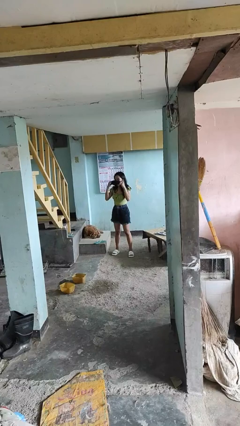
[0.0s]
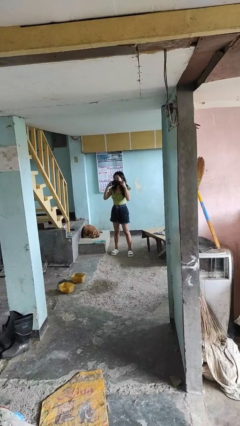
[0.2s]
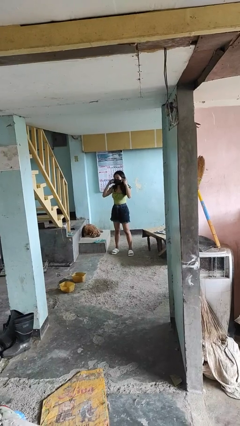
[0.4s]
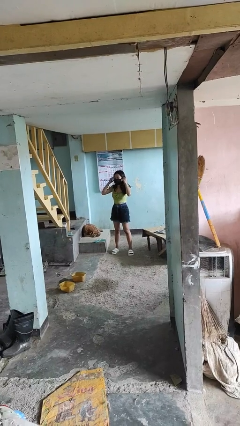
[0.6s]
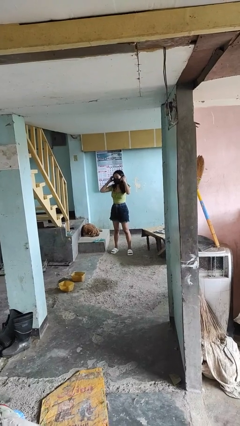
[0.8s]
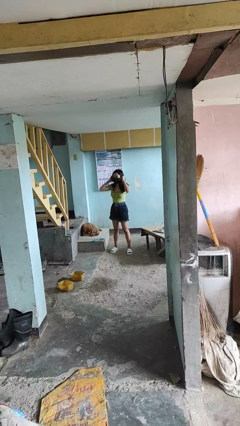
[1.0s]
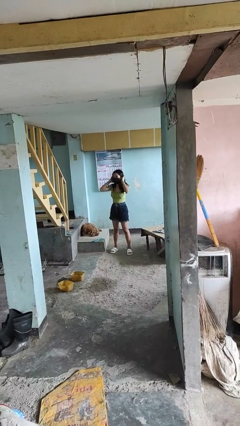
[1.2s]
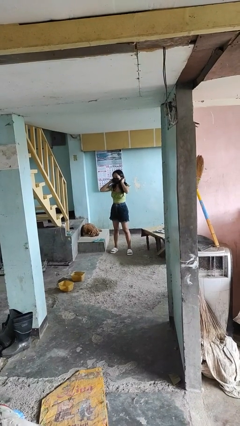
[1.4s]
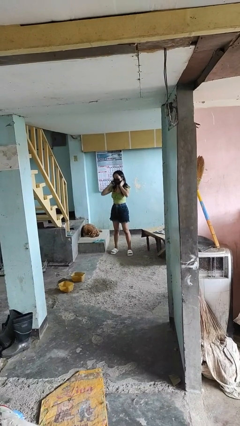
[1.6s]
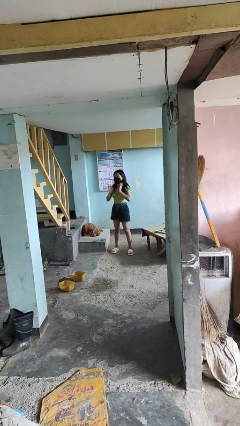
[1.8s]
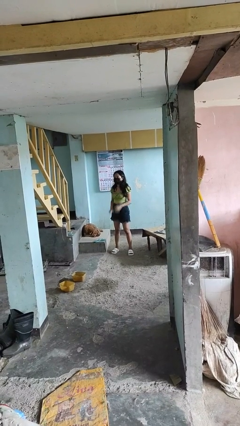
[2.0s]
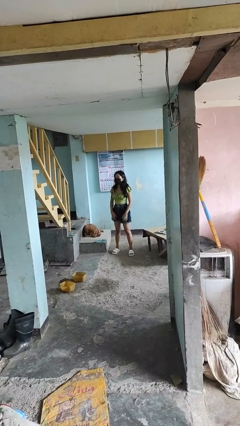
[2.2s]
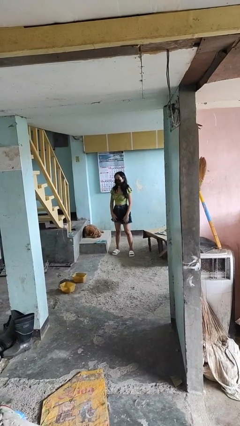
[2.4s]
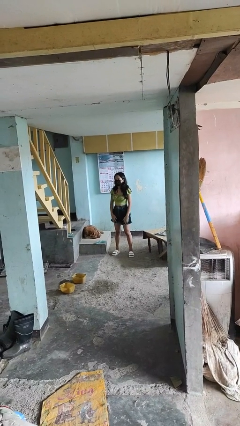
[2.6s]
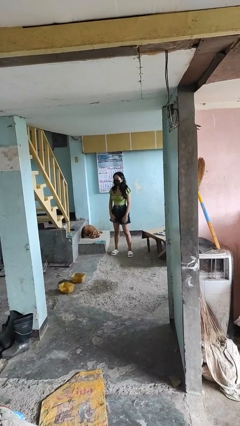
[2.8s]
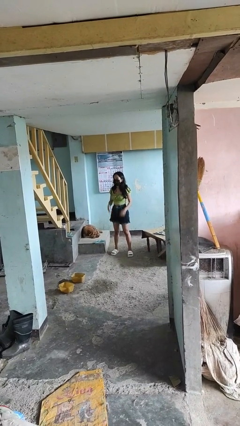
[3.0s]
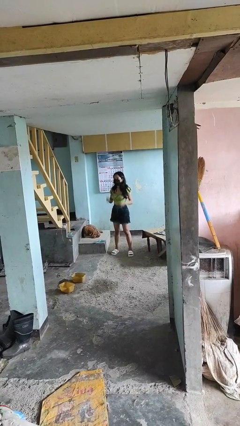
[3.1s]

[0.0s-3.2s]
person puts on facemask

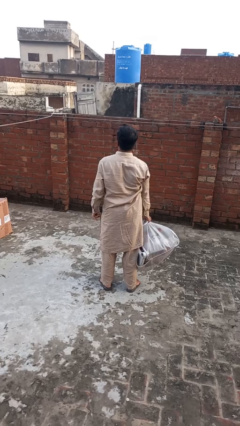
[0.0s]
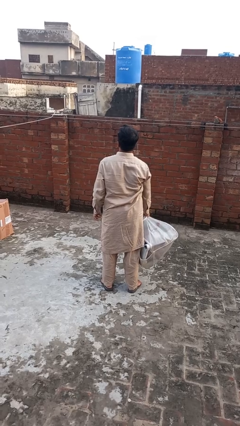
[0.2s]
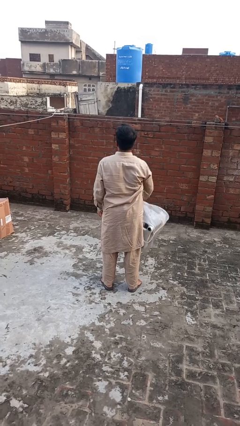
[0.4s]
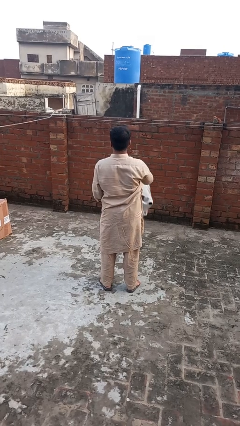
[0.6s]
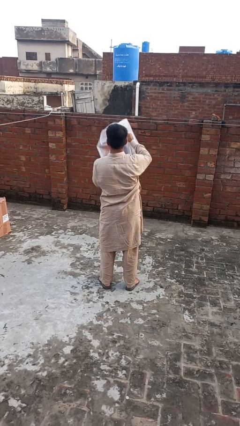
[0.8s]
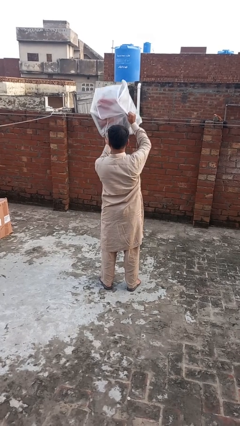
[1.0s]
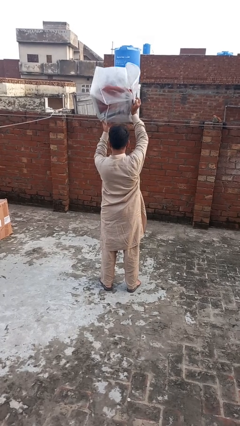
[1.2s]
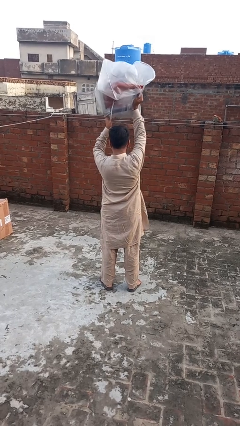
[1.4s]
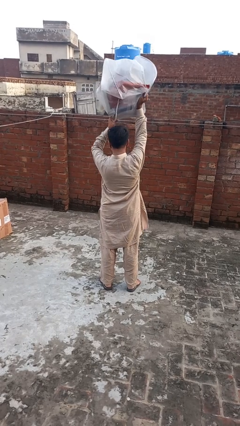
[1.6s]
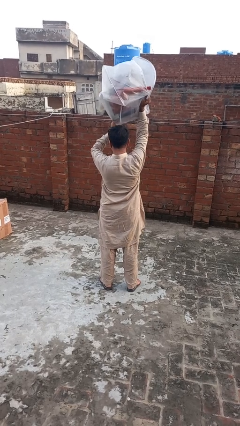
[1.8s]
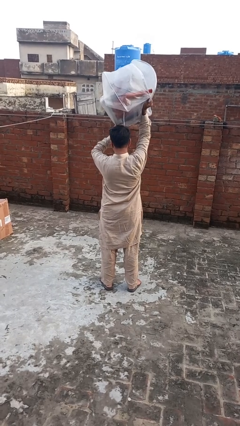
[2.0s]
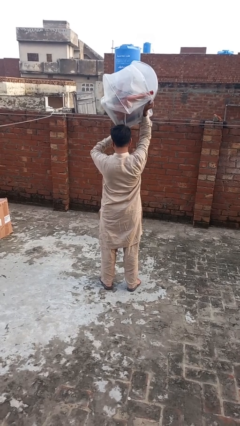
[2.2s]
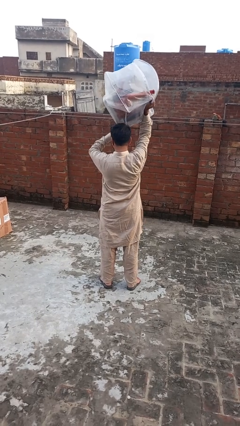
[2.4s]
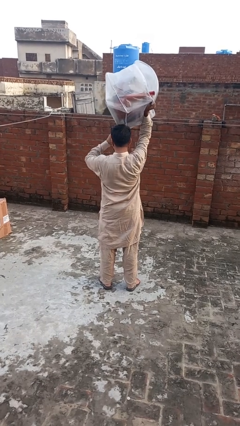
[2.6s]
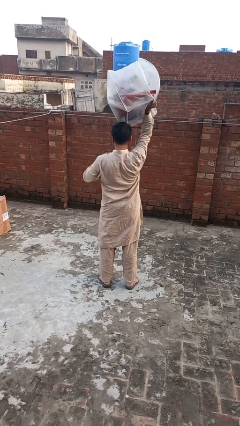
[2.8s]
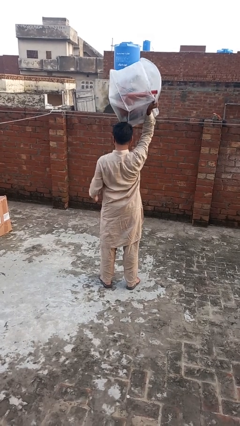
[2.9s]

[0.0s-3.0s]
person holds object above head

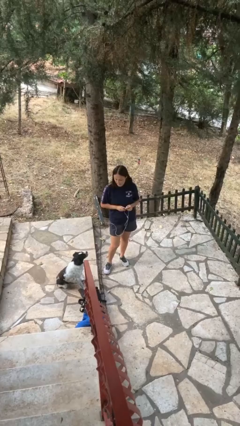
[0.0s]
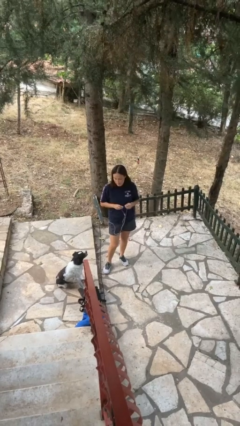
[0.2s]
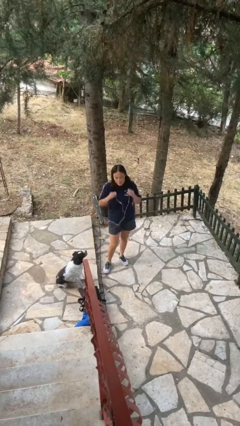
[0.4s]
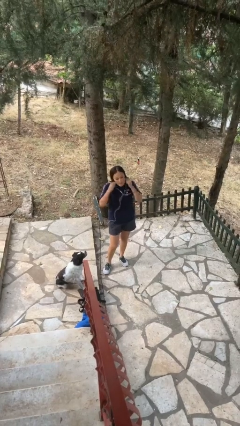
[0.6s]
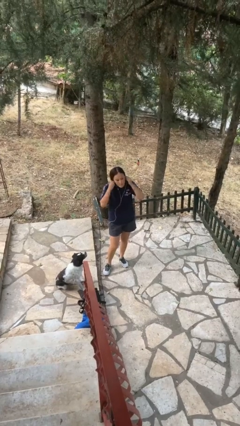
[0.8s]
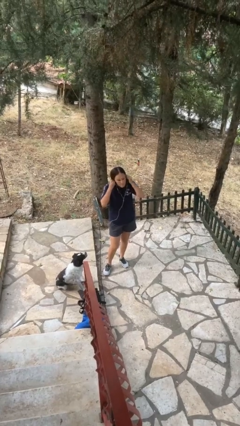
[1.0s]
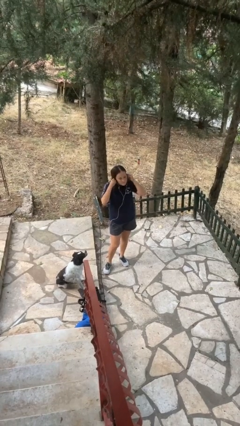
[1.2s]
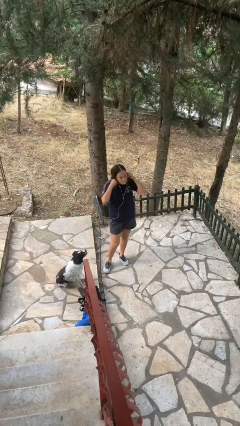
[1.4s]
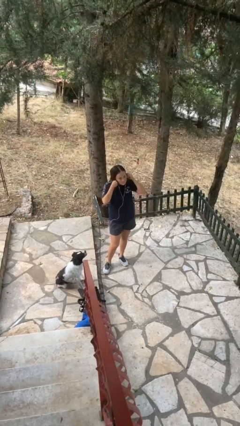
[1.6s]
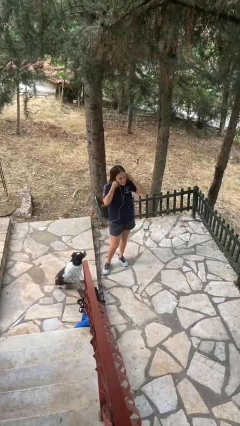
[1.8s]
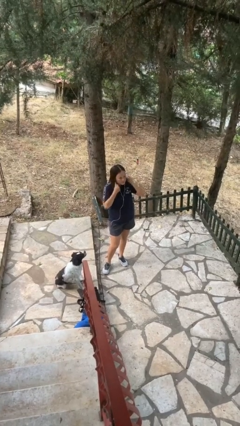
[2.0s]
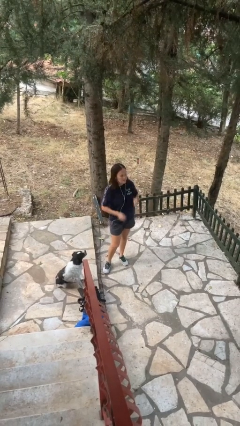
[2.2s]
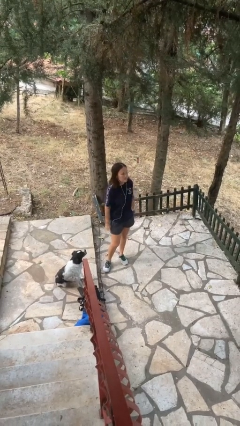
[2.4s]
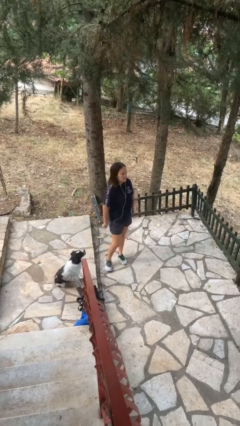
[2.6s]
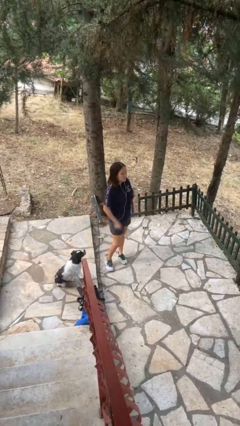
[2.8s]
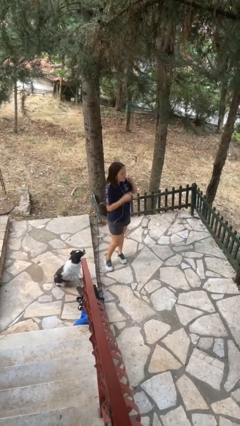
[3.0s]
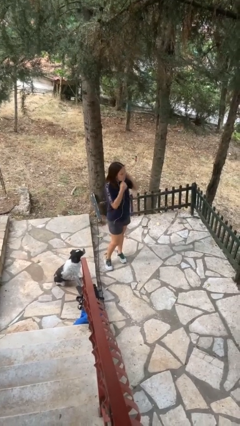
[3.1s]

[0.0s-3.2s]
person puts on headphones

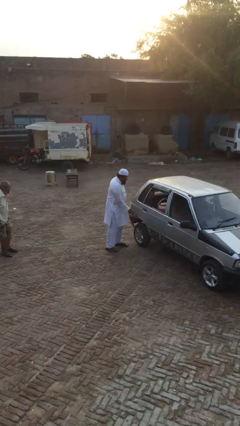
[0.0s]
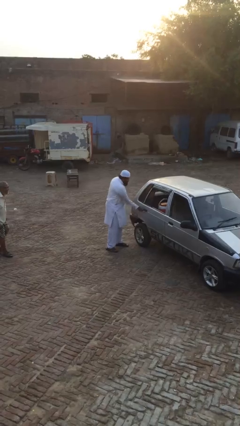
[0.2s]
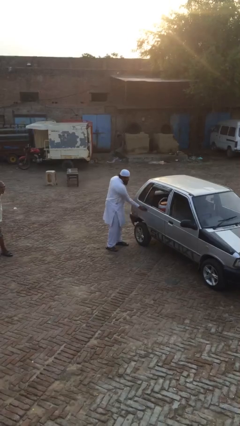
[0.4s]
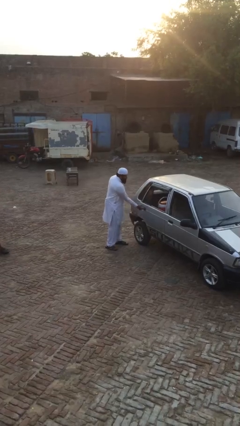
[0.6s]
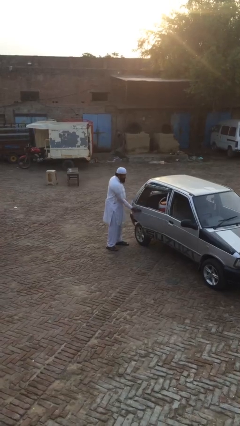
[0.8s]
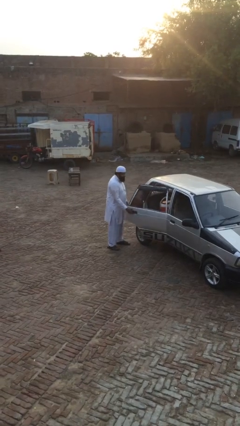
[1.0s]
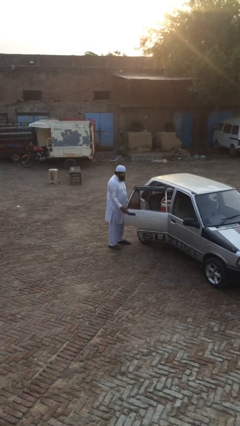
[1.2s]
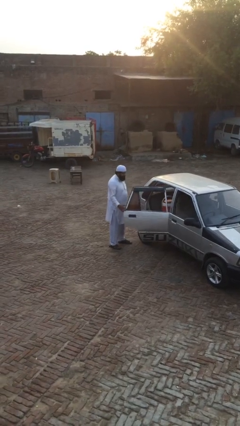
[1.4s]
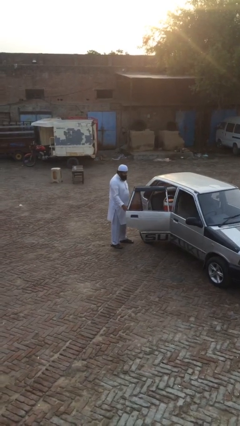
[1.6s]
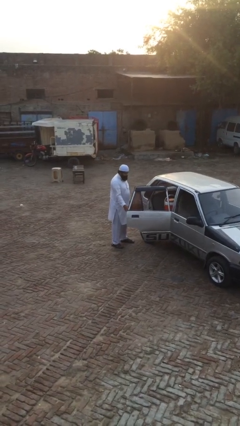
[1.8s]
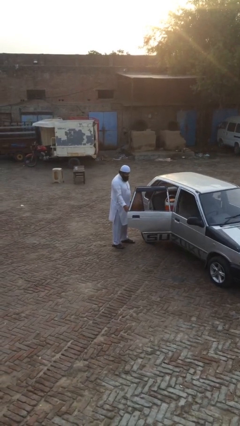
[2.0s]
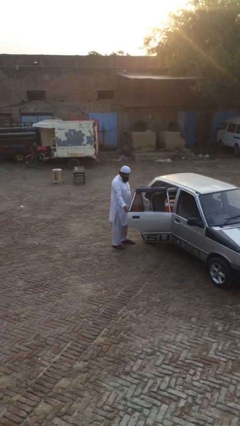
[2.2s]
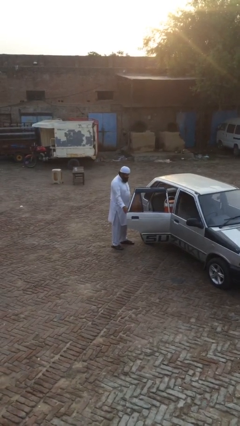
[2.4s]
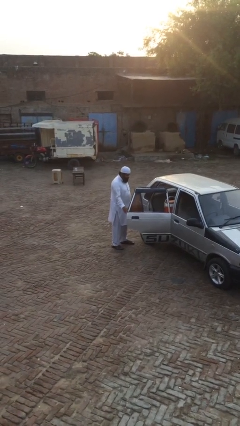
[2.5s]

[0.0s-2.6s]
person opens car door

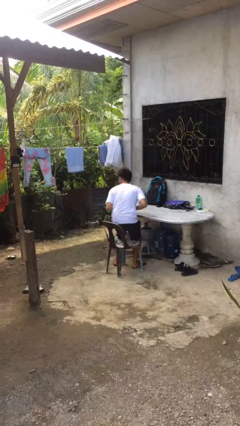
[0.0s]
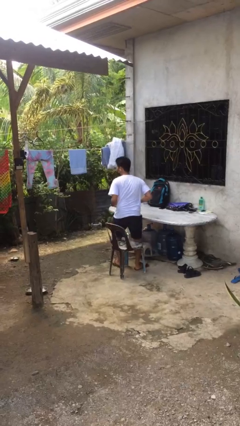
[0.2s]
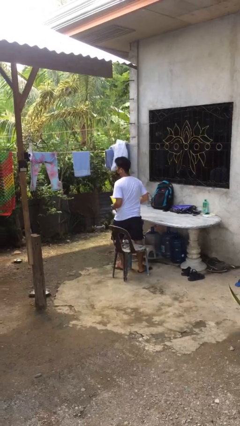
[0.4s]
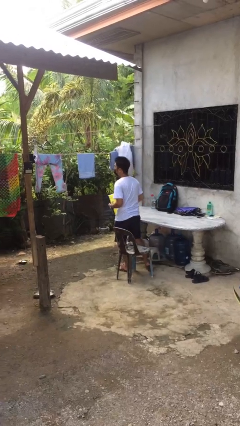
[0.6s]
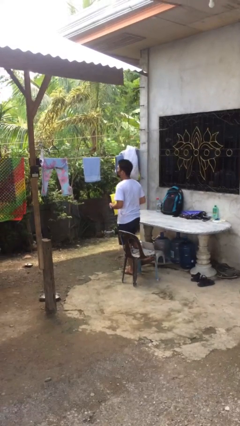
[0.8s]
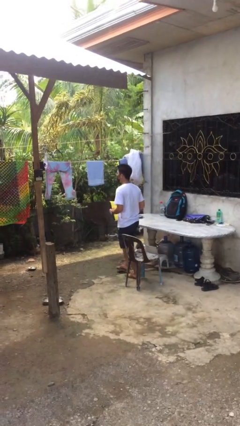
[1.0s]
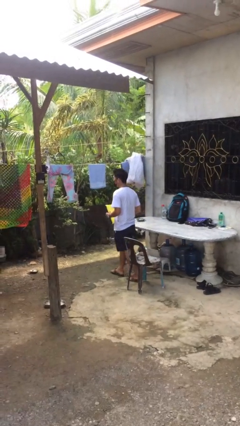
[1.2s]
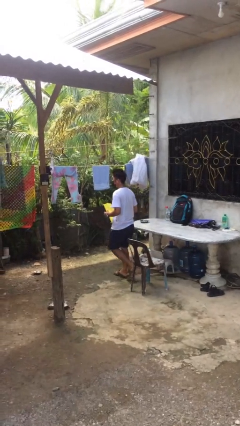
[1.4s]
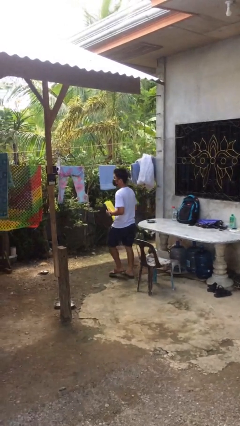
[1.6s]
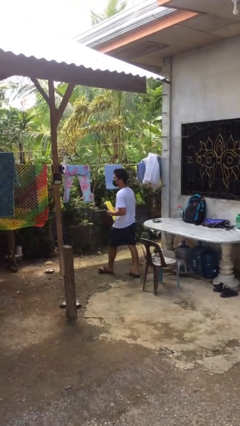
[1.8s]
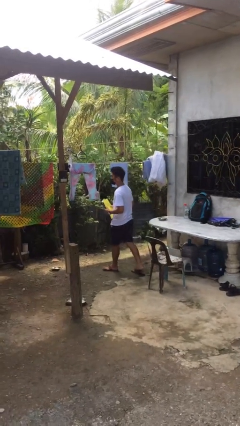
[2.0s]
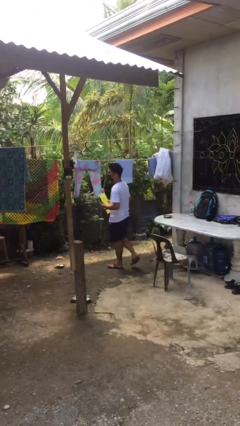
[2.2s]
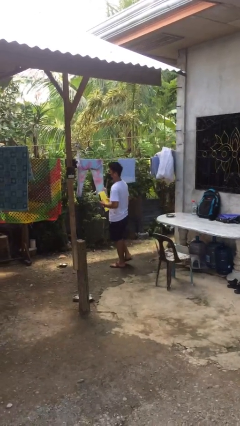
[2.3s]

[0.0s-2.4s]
person stands up

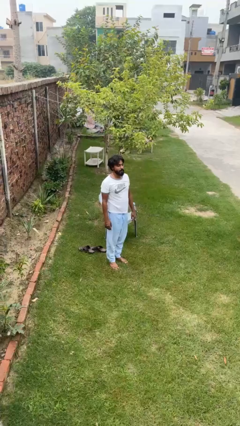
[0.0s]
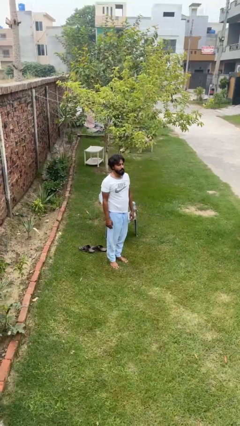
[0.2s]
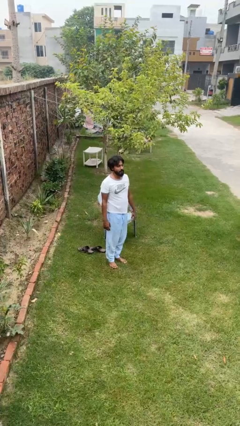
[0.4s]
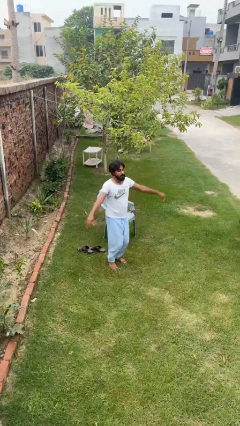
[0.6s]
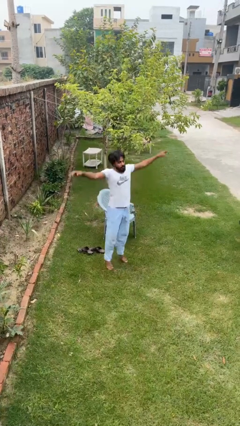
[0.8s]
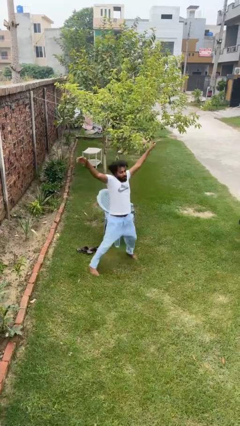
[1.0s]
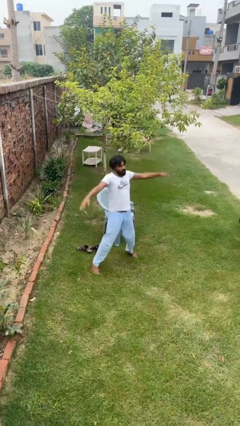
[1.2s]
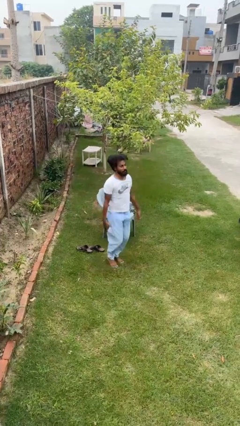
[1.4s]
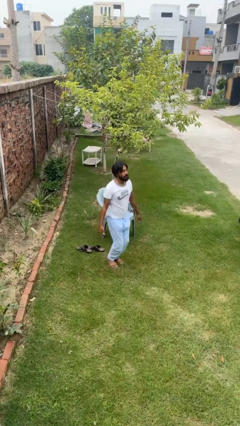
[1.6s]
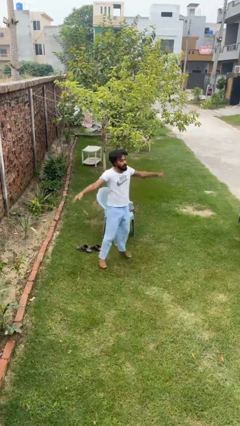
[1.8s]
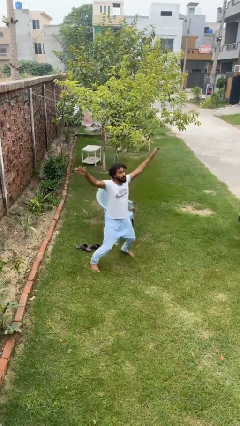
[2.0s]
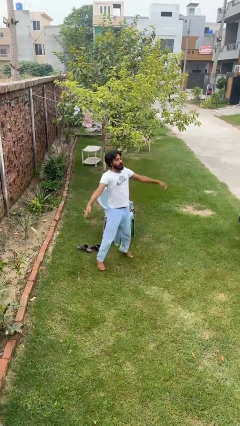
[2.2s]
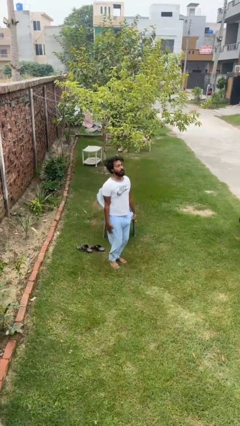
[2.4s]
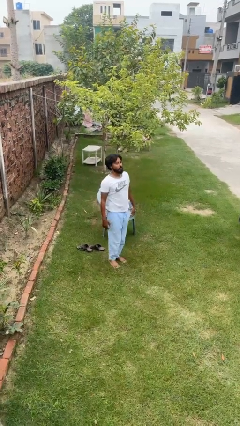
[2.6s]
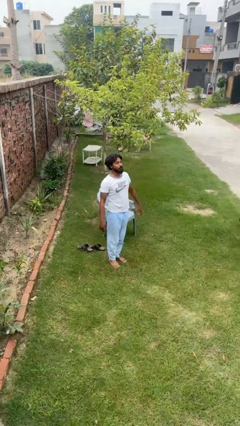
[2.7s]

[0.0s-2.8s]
person exercises with jumping jacks
